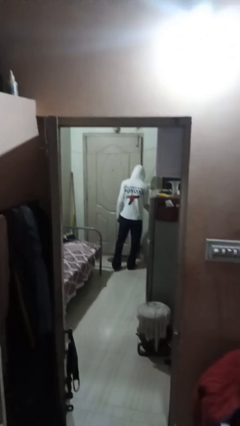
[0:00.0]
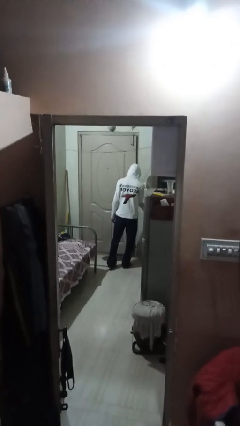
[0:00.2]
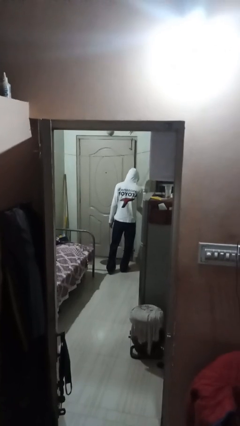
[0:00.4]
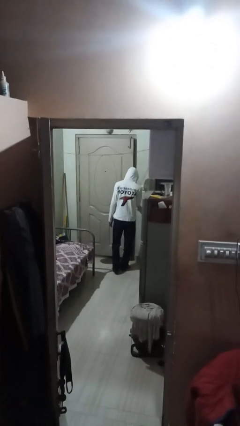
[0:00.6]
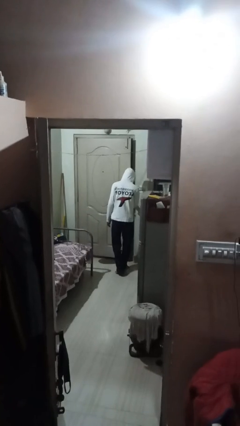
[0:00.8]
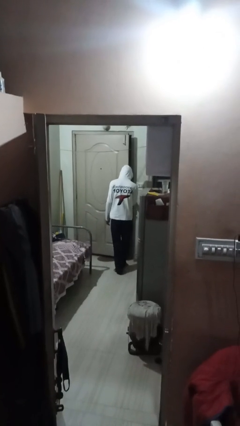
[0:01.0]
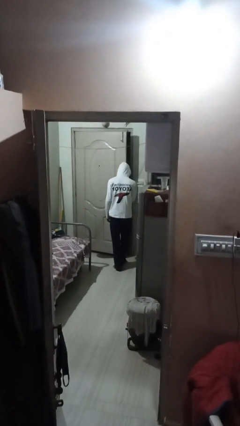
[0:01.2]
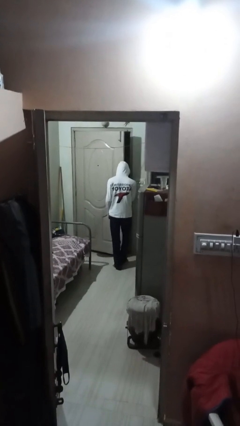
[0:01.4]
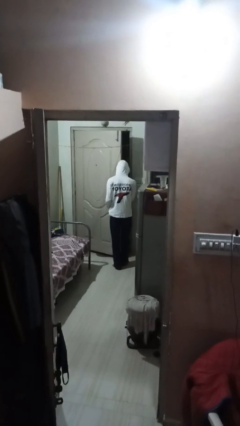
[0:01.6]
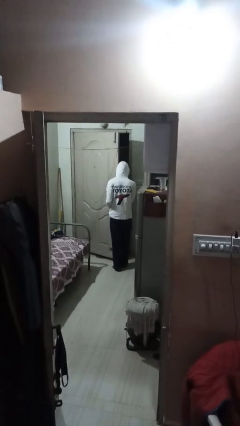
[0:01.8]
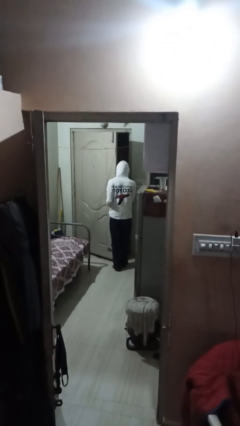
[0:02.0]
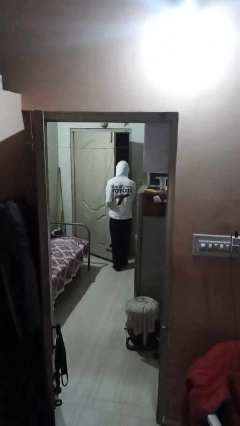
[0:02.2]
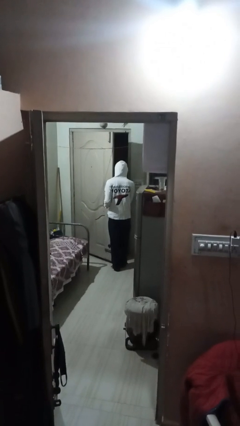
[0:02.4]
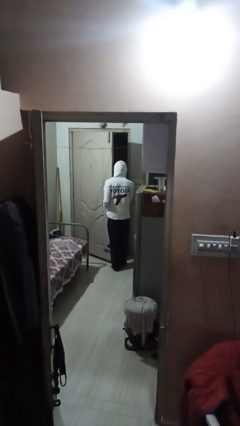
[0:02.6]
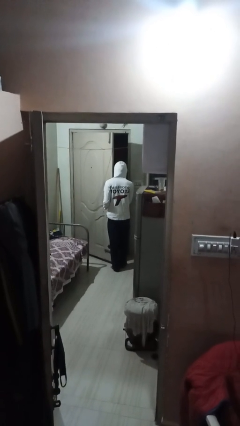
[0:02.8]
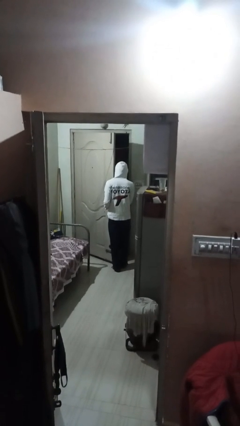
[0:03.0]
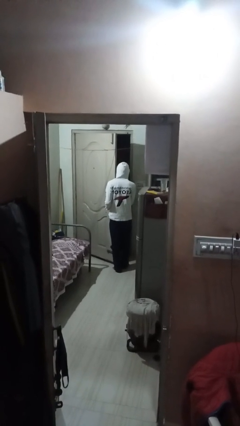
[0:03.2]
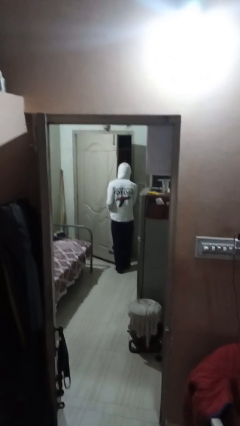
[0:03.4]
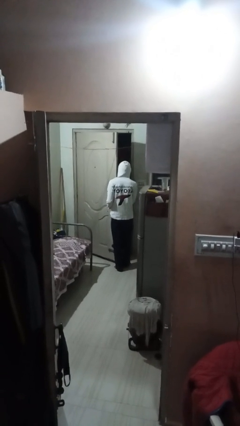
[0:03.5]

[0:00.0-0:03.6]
person opens facility door

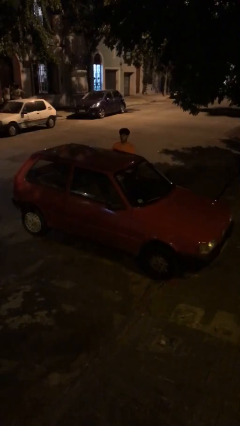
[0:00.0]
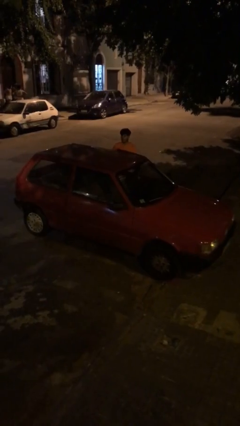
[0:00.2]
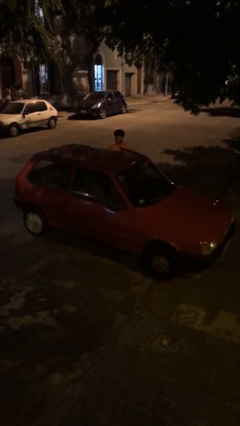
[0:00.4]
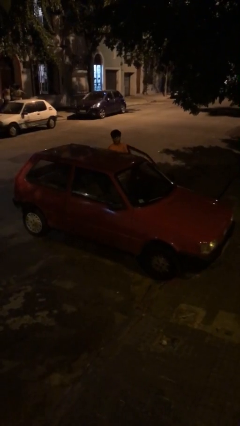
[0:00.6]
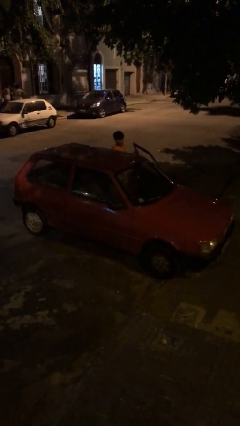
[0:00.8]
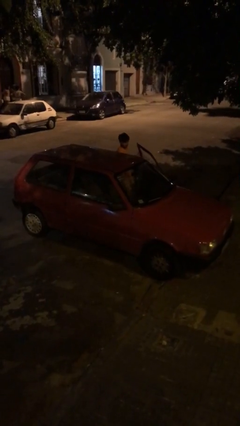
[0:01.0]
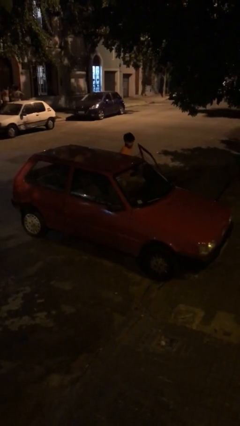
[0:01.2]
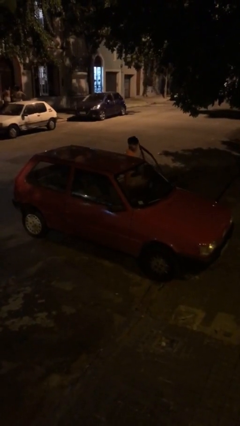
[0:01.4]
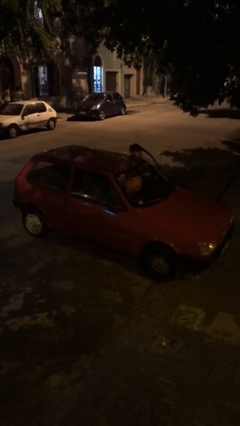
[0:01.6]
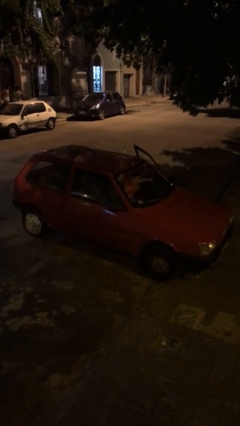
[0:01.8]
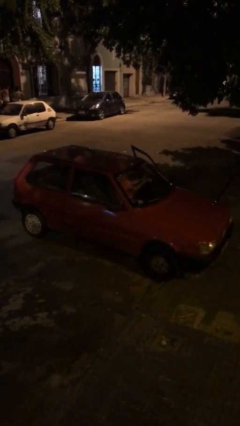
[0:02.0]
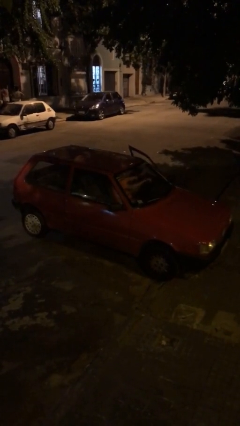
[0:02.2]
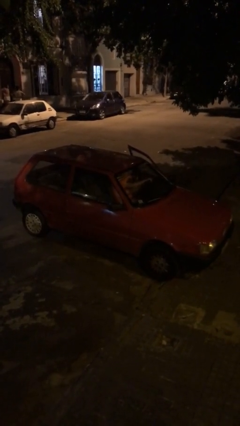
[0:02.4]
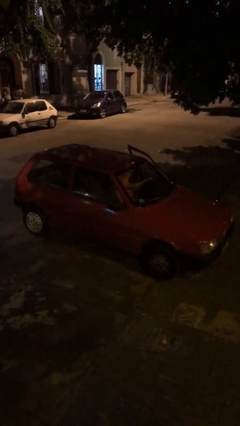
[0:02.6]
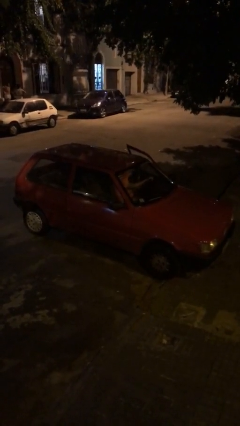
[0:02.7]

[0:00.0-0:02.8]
car picks up person

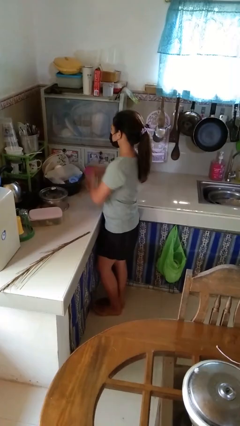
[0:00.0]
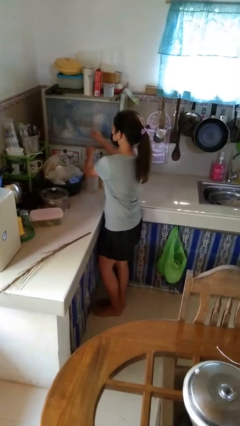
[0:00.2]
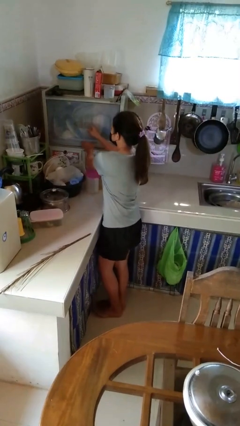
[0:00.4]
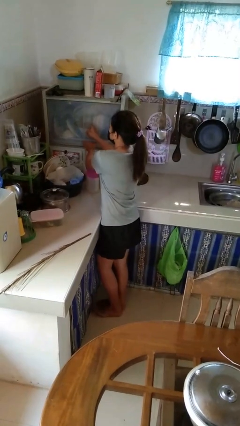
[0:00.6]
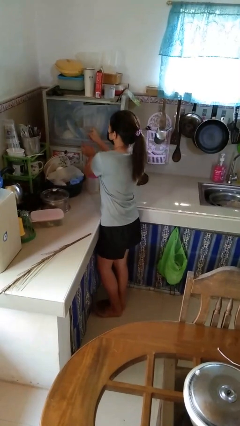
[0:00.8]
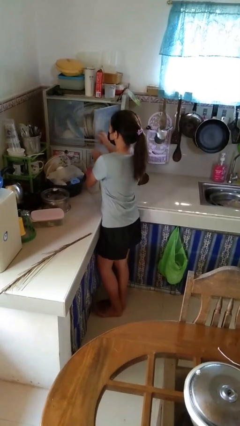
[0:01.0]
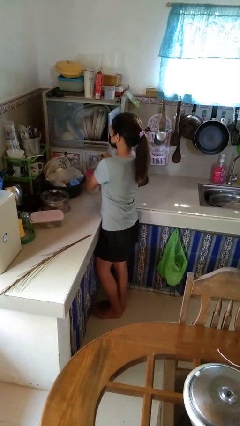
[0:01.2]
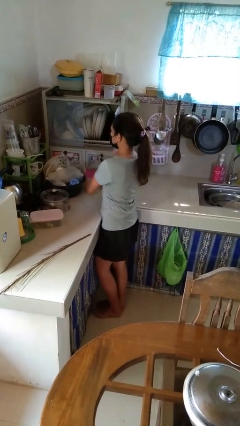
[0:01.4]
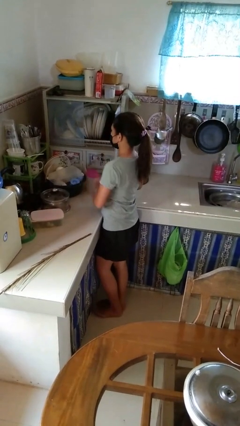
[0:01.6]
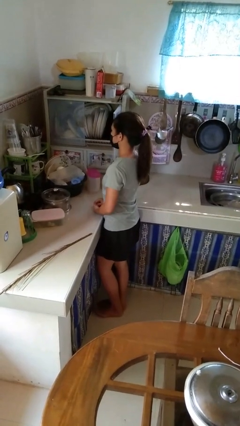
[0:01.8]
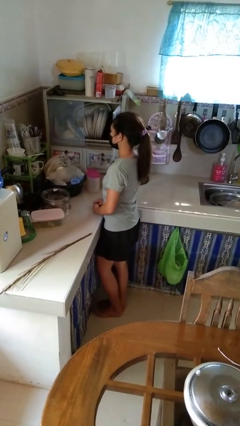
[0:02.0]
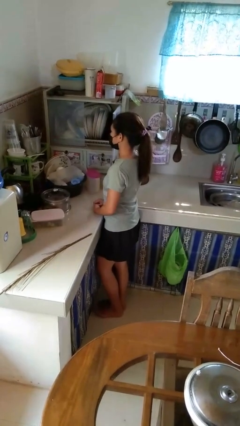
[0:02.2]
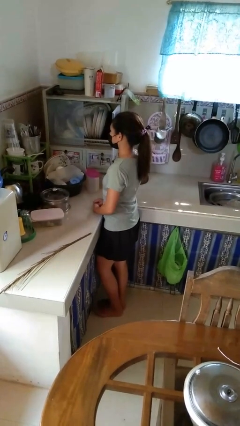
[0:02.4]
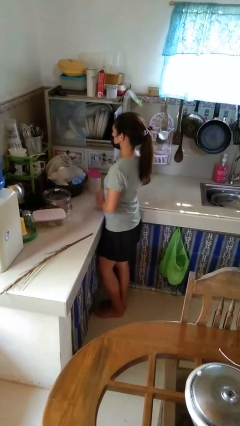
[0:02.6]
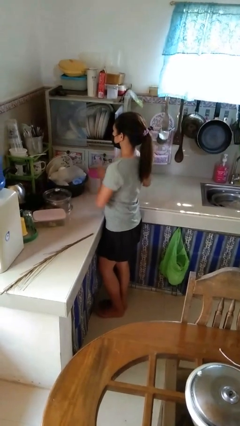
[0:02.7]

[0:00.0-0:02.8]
person opens kitchen drawer

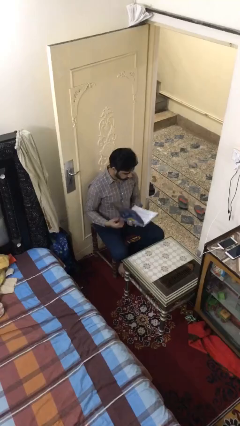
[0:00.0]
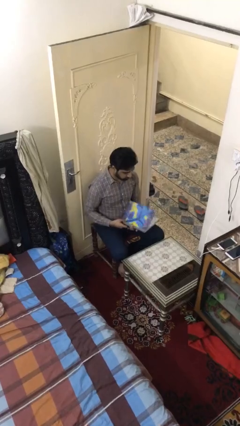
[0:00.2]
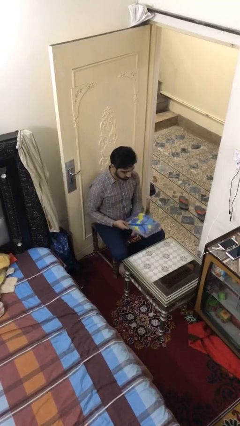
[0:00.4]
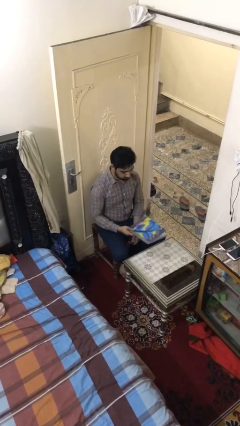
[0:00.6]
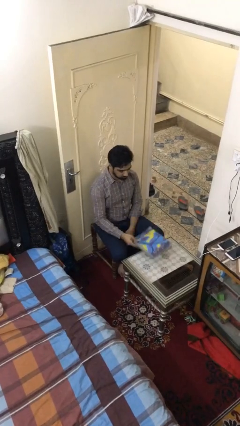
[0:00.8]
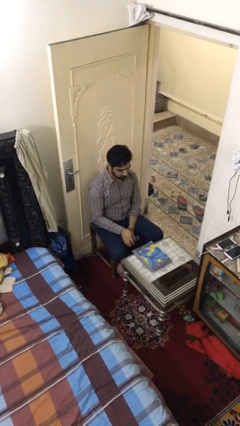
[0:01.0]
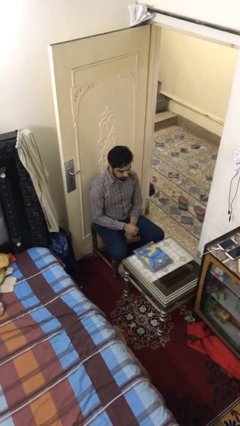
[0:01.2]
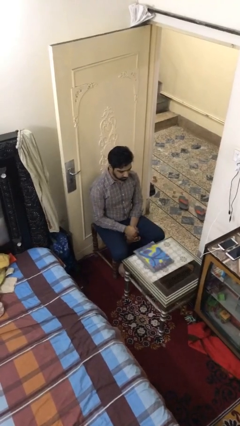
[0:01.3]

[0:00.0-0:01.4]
person puts down object on table

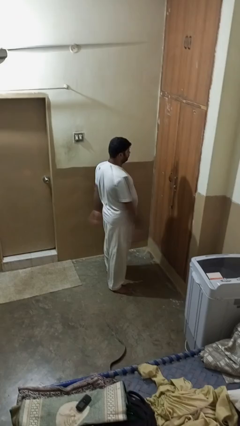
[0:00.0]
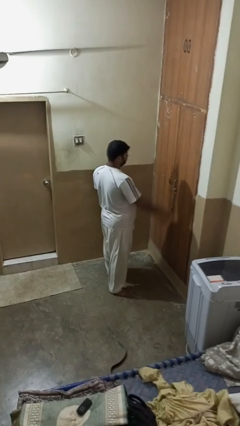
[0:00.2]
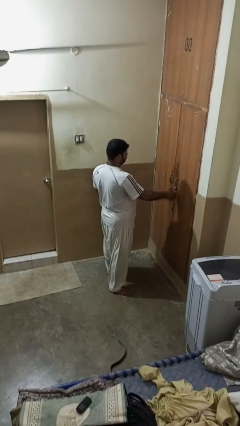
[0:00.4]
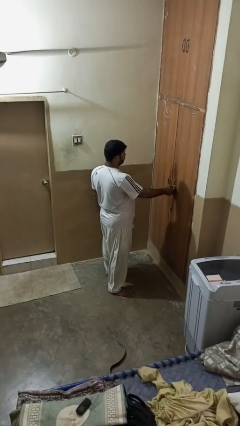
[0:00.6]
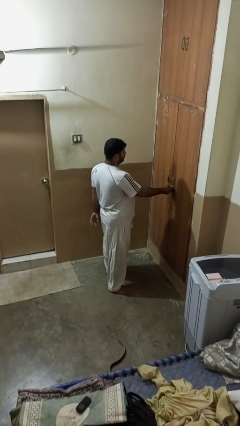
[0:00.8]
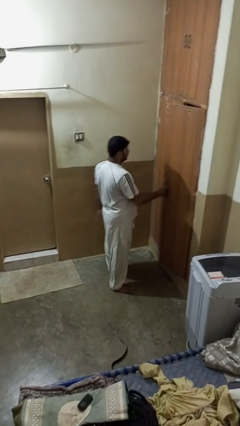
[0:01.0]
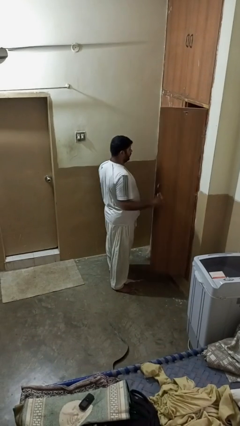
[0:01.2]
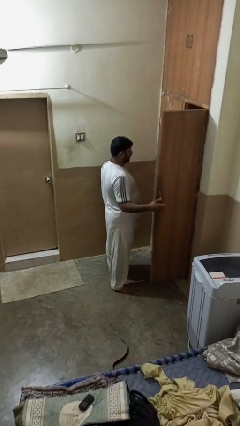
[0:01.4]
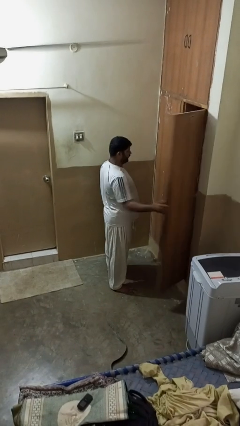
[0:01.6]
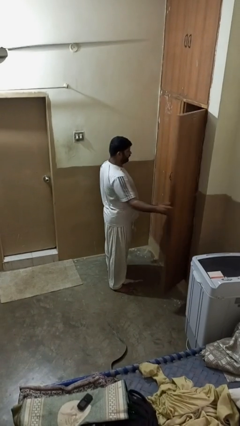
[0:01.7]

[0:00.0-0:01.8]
person opens closet door

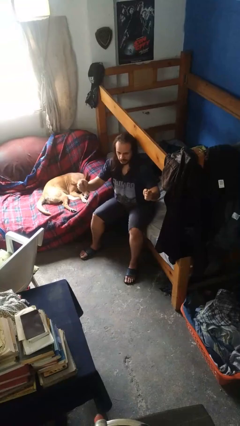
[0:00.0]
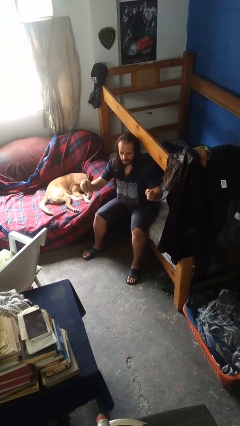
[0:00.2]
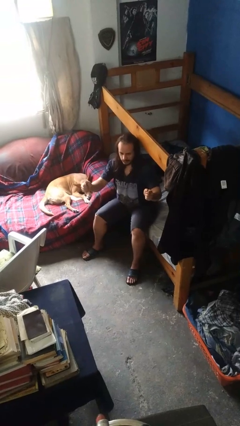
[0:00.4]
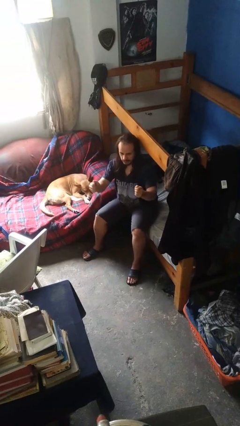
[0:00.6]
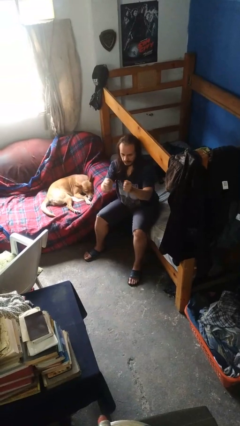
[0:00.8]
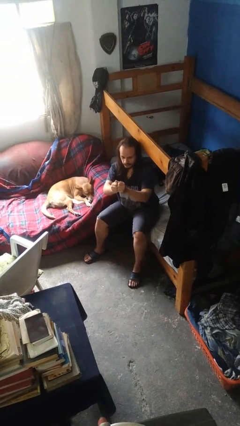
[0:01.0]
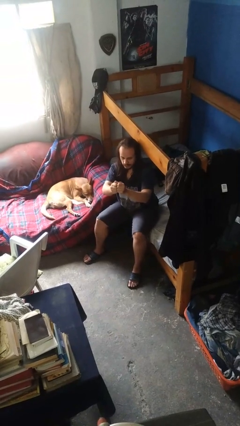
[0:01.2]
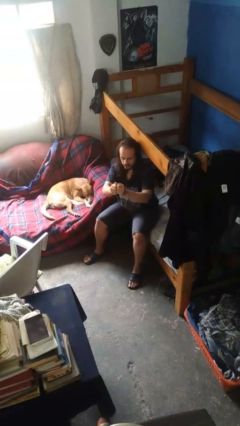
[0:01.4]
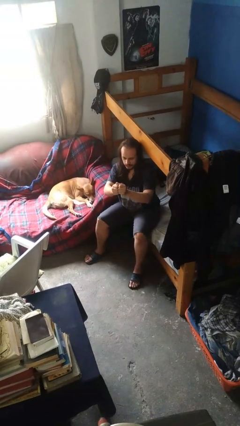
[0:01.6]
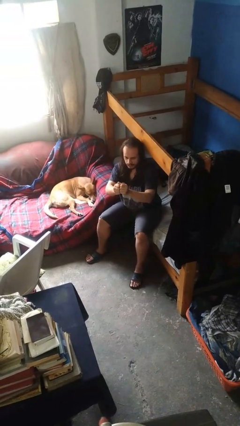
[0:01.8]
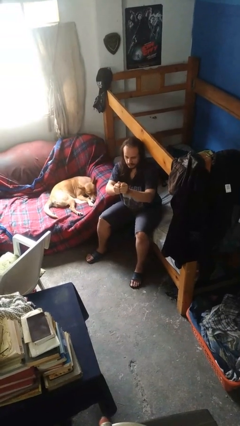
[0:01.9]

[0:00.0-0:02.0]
person gestures zoom out

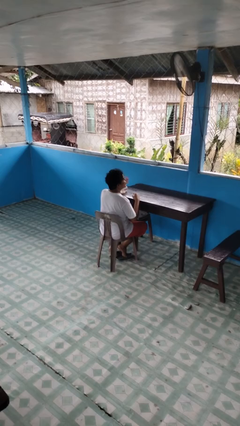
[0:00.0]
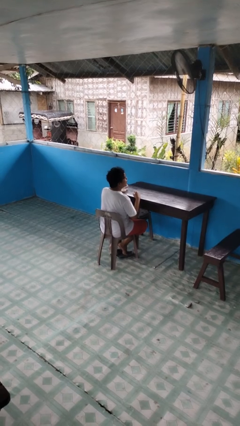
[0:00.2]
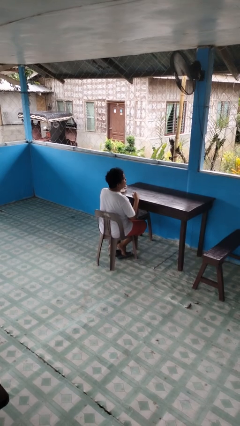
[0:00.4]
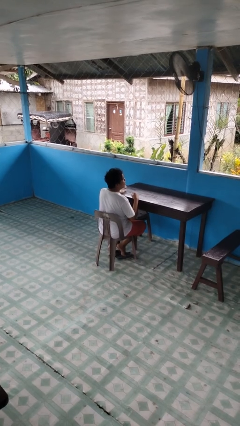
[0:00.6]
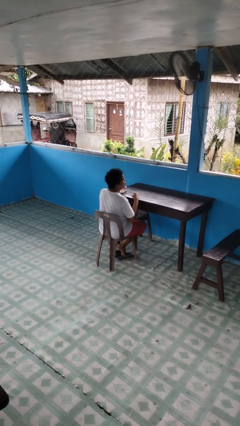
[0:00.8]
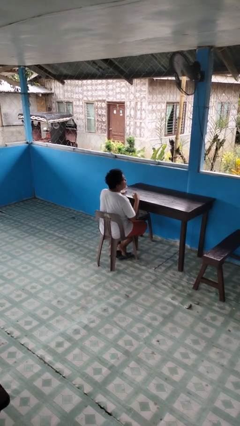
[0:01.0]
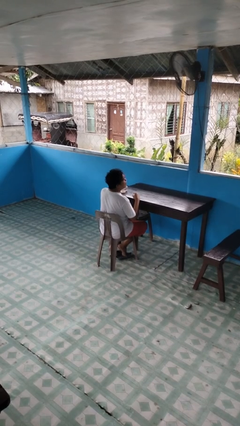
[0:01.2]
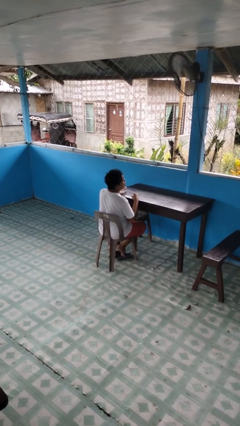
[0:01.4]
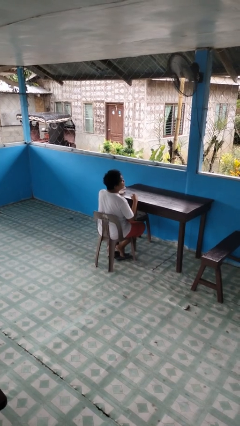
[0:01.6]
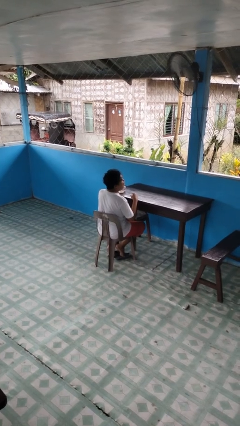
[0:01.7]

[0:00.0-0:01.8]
person shaves face

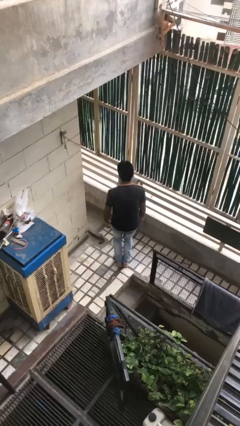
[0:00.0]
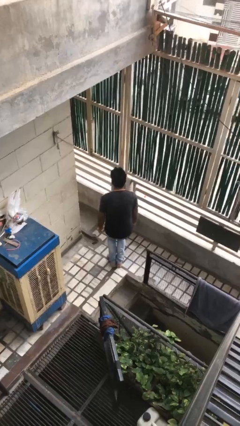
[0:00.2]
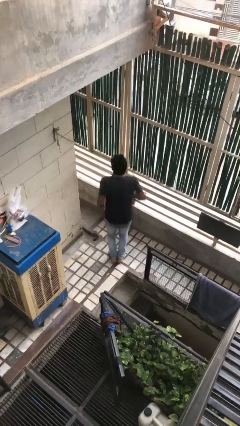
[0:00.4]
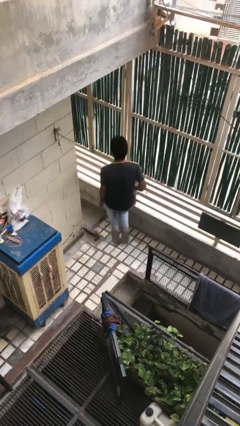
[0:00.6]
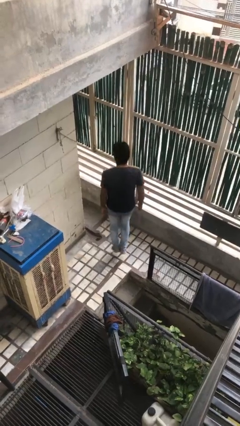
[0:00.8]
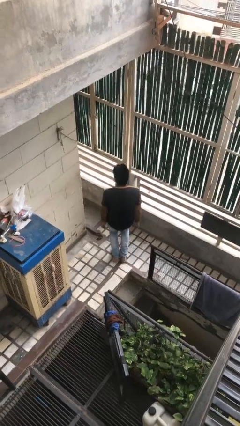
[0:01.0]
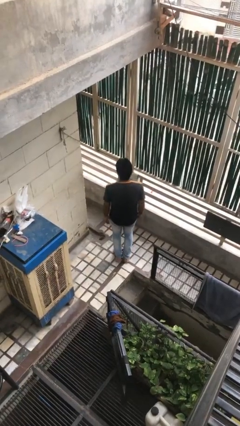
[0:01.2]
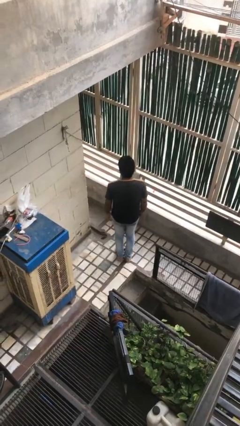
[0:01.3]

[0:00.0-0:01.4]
person jumps
